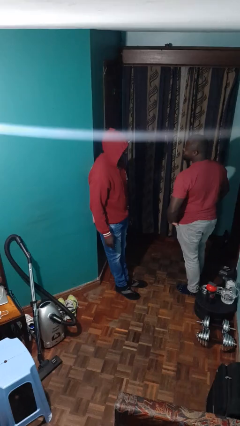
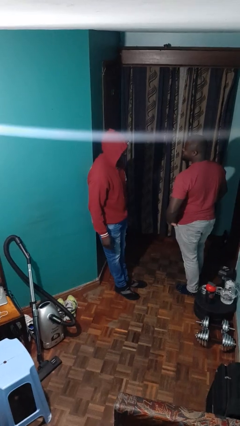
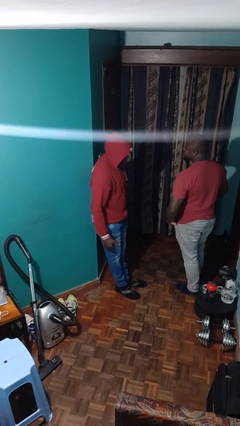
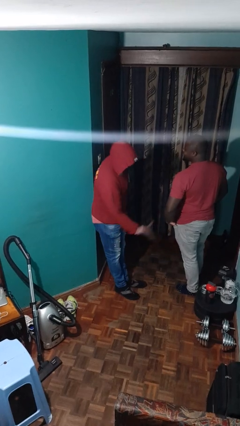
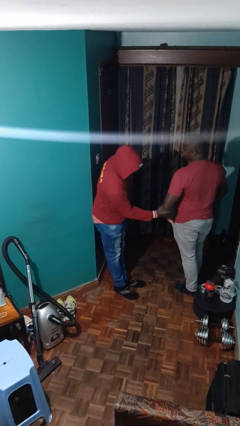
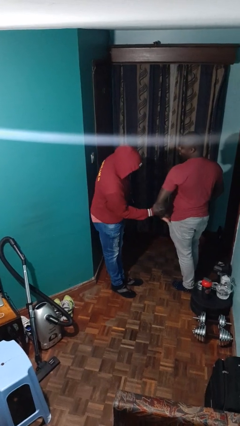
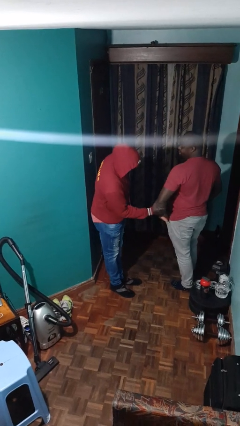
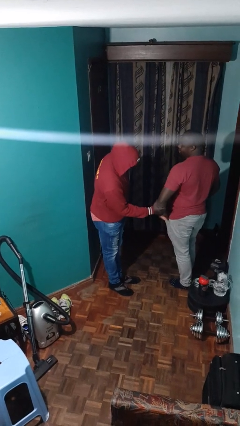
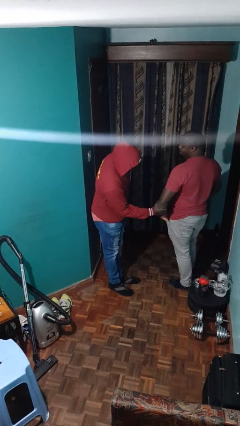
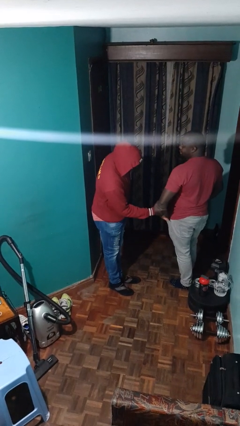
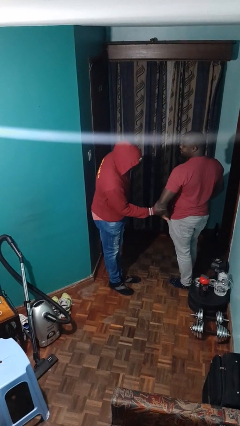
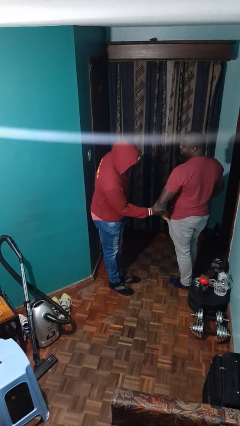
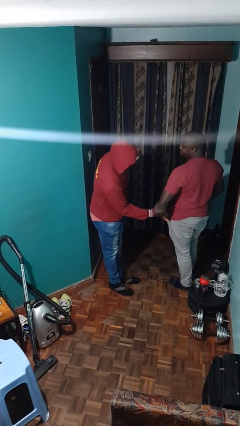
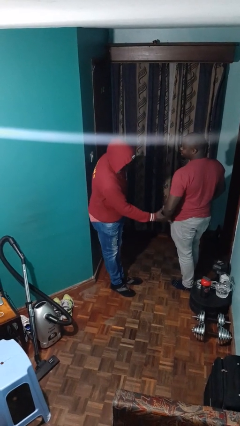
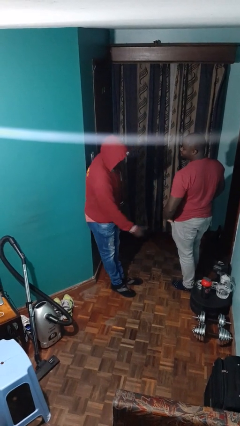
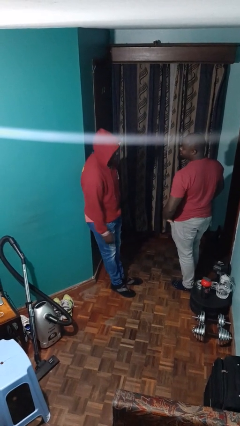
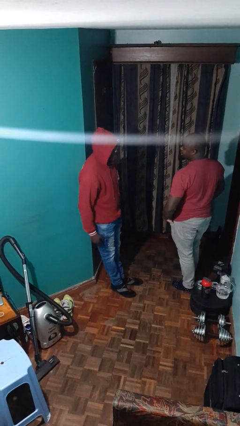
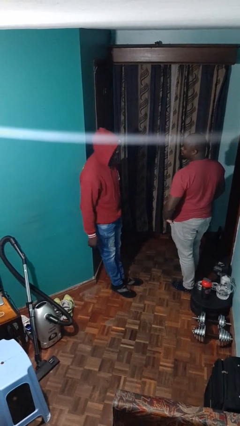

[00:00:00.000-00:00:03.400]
person grabs person by forearm

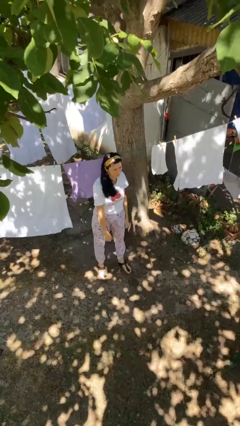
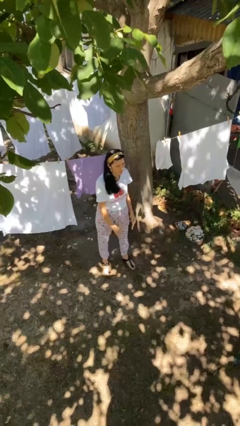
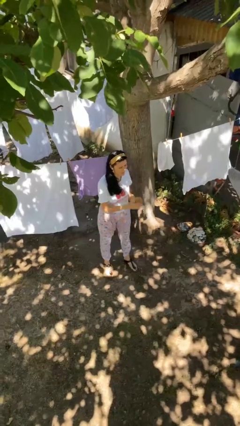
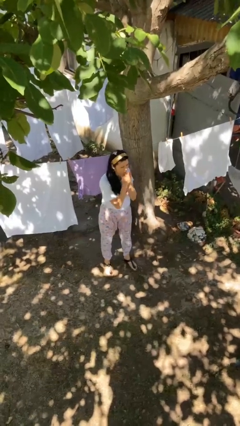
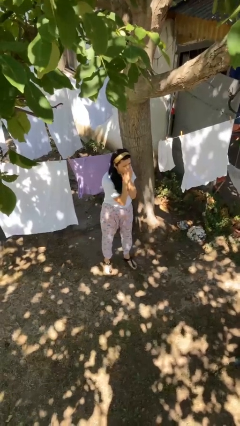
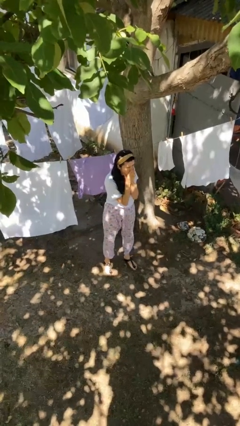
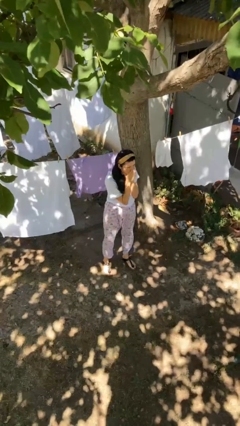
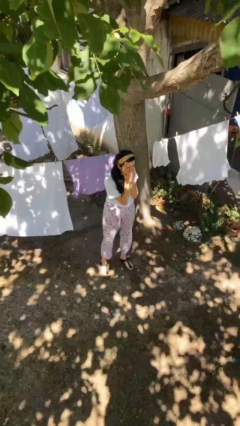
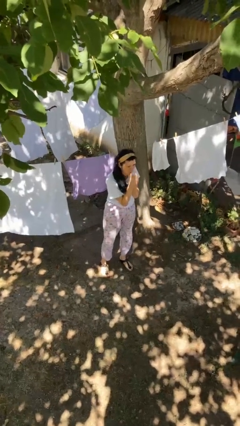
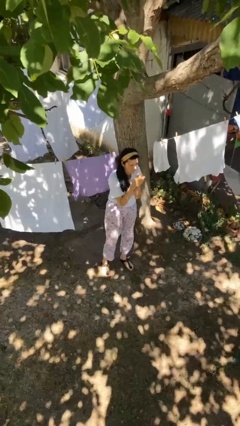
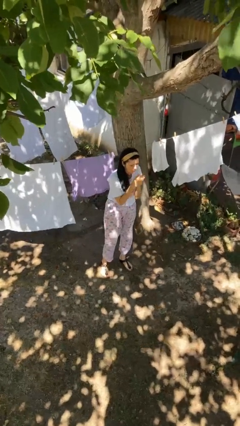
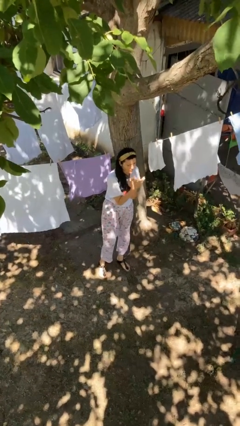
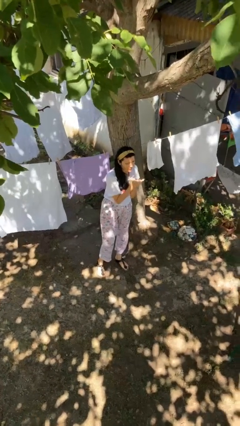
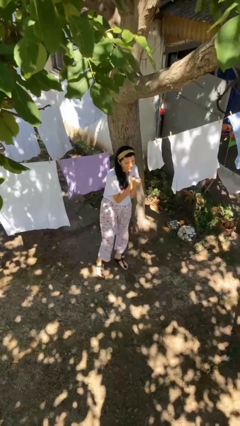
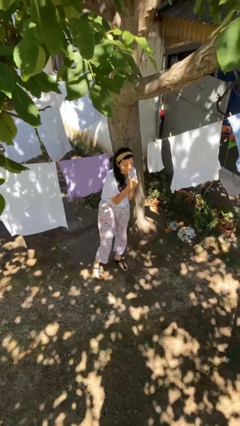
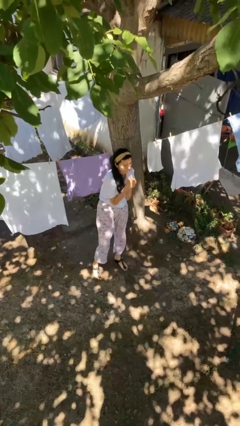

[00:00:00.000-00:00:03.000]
person blows into hands

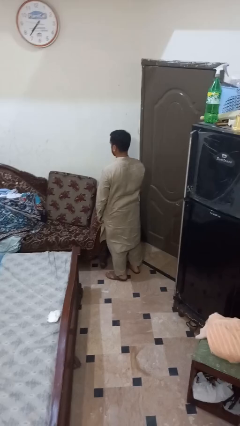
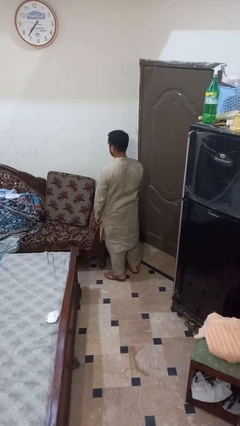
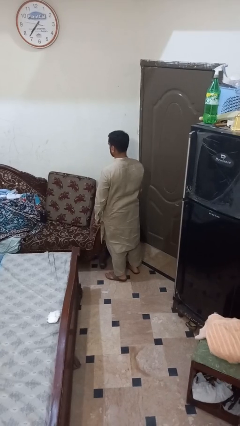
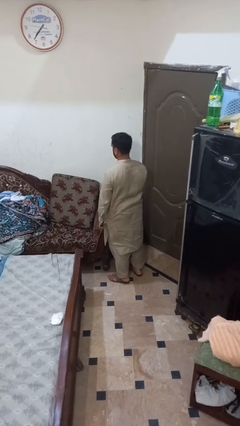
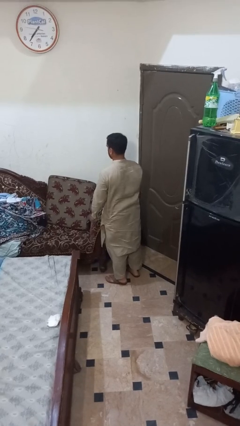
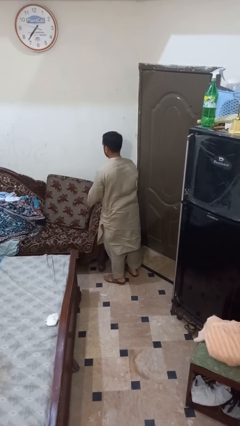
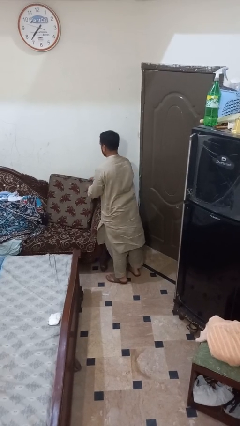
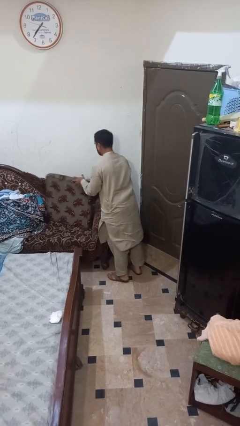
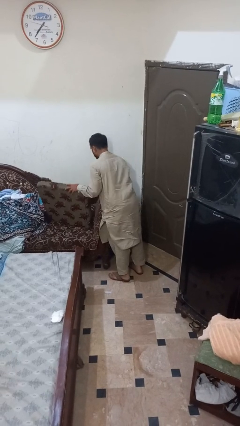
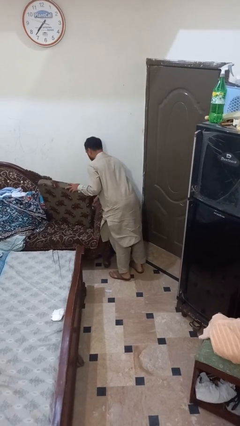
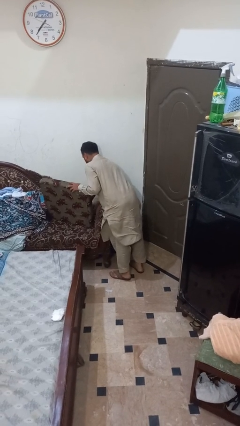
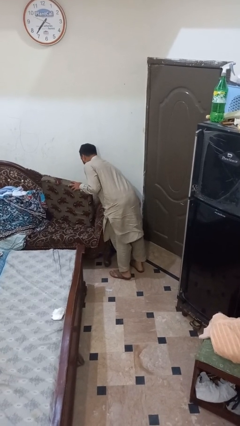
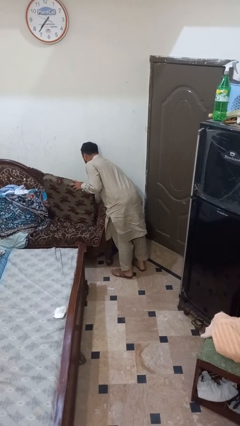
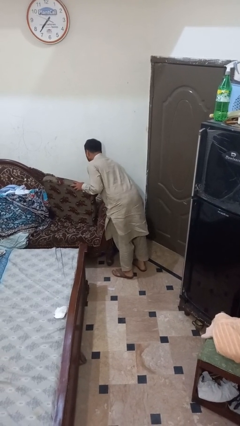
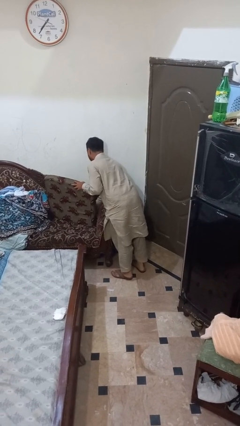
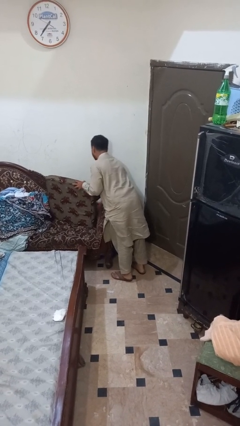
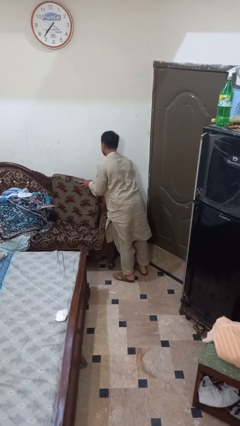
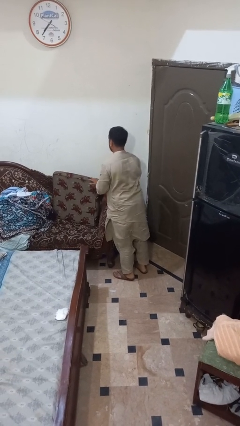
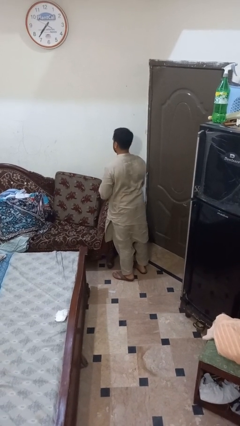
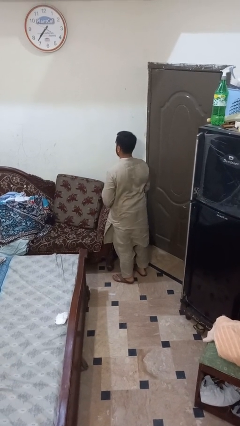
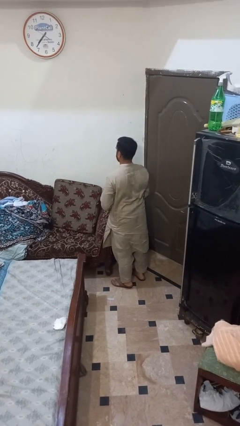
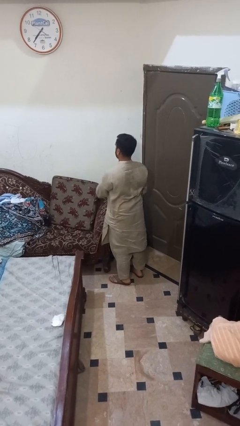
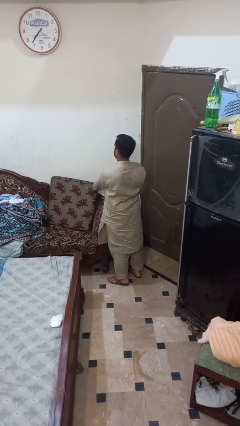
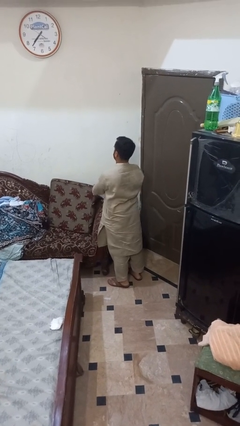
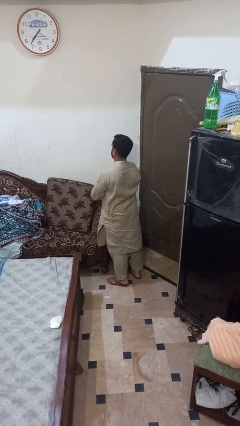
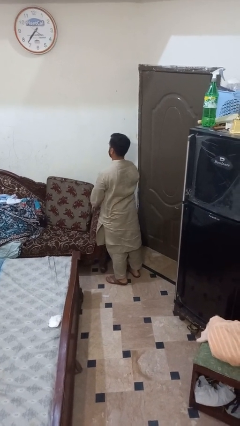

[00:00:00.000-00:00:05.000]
person searches in couch

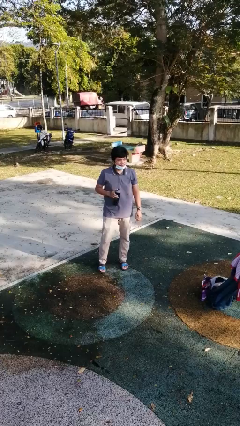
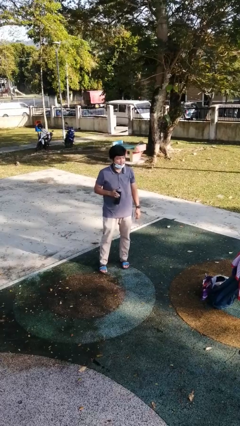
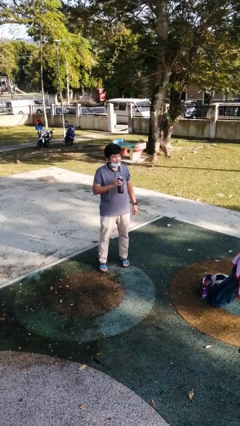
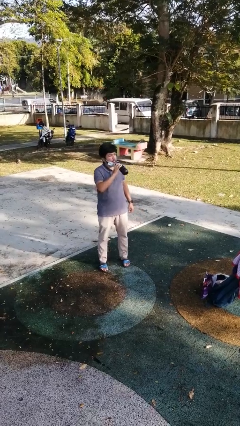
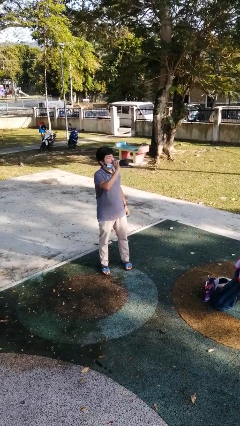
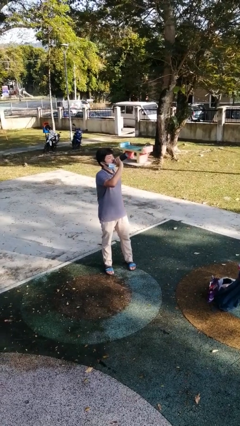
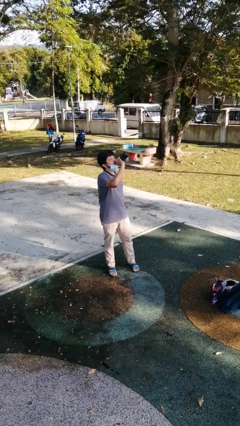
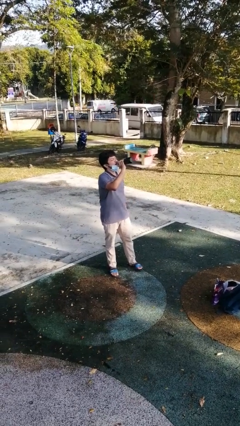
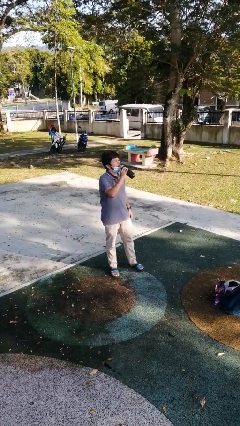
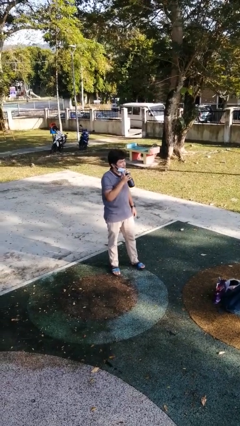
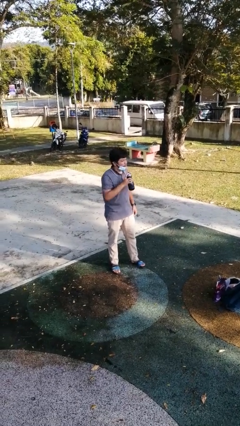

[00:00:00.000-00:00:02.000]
person drinks from bottle

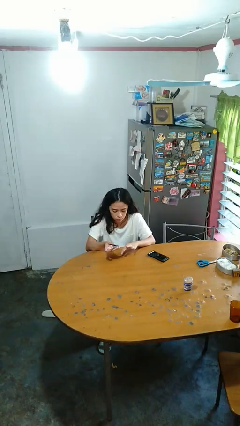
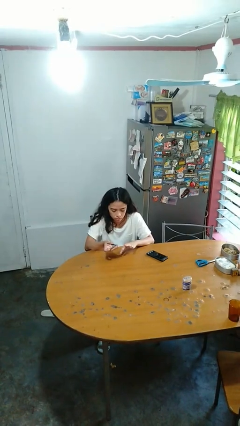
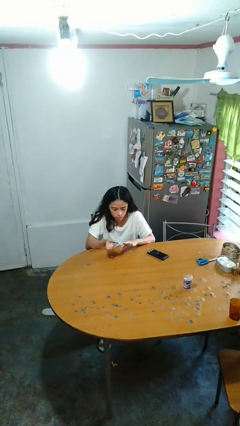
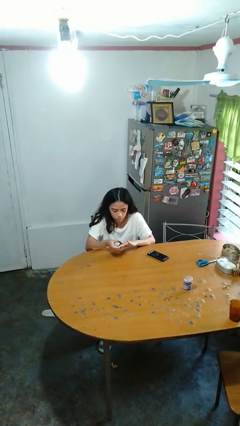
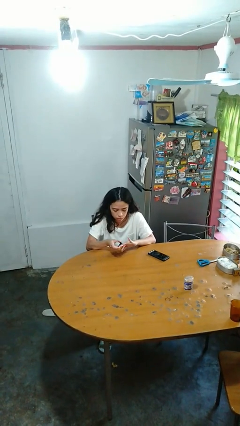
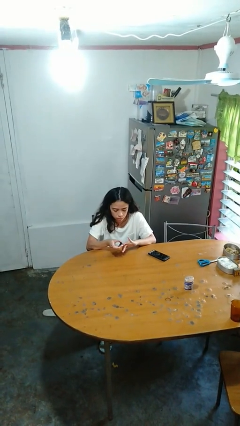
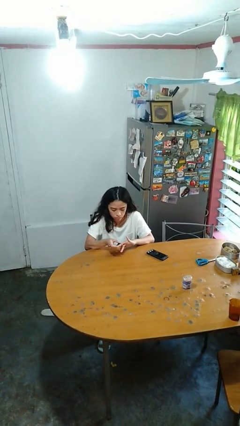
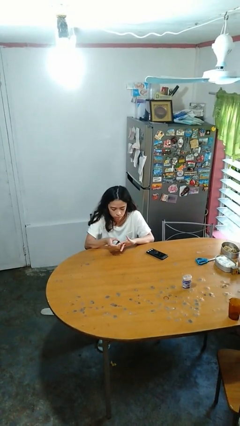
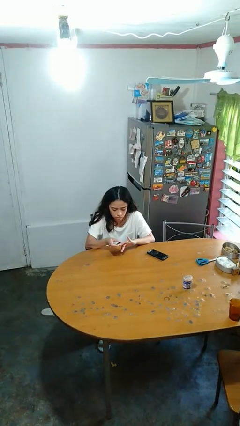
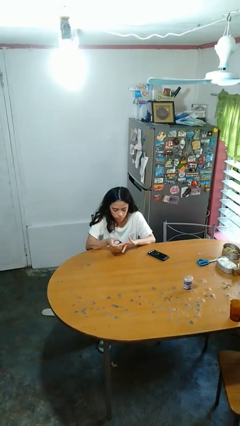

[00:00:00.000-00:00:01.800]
person clips fingernails

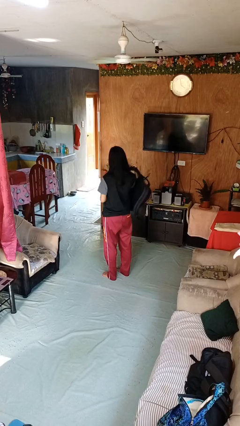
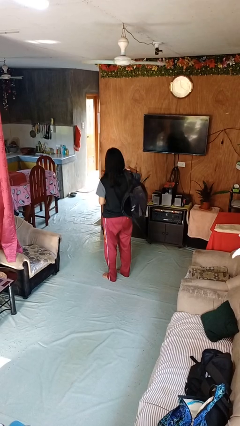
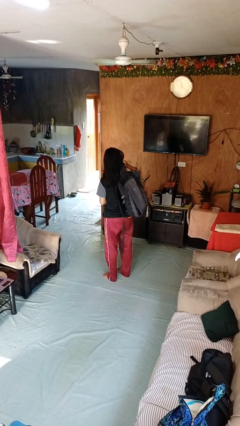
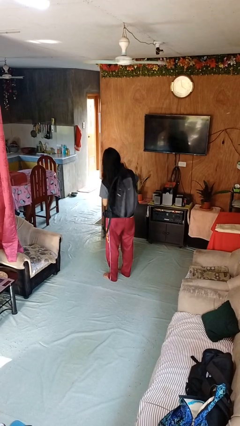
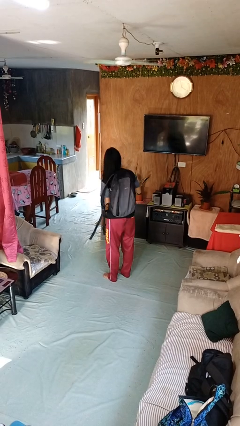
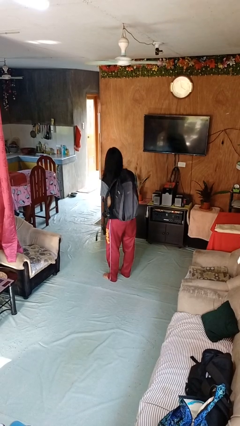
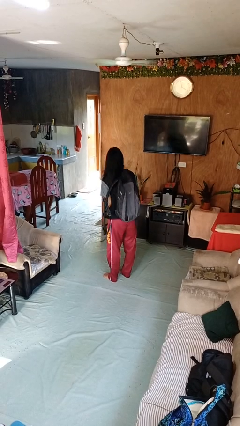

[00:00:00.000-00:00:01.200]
person puts on backpack

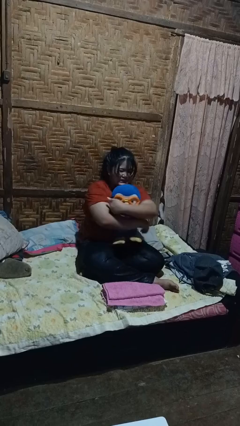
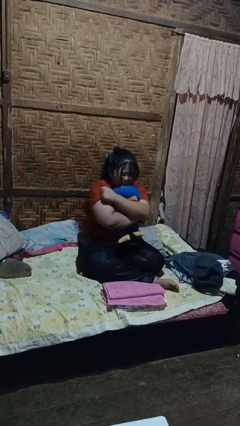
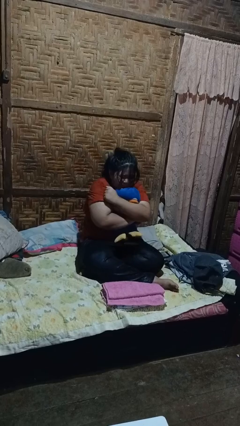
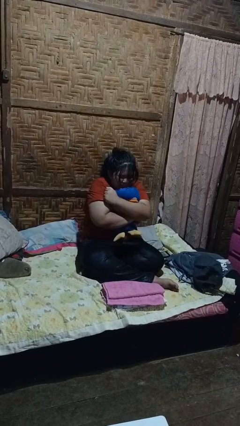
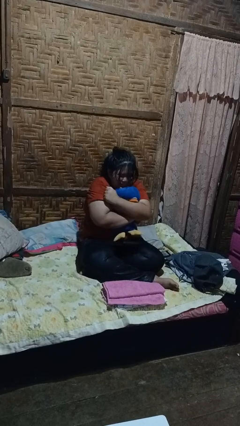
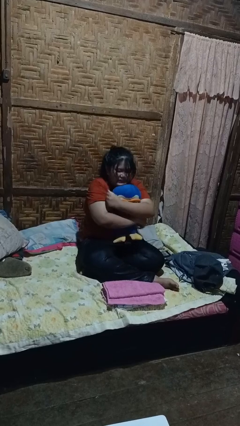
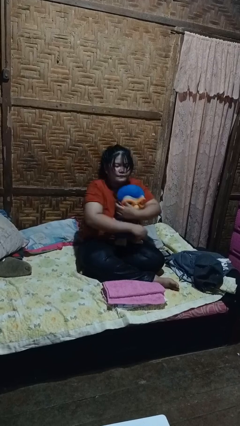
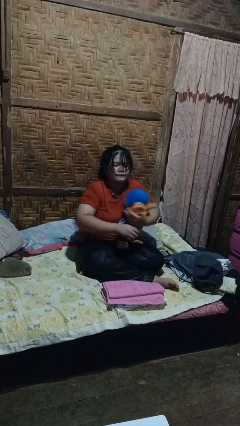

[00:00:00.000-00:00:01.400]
person hugs stuffed animal
